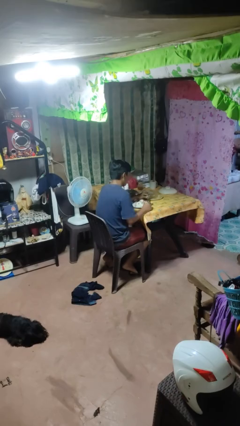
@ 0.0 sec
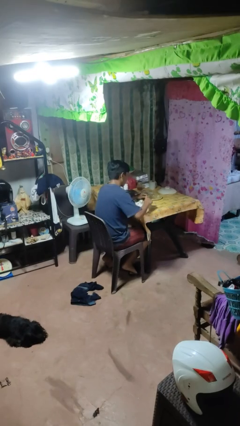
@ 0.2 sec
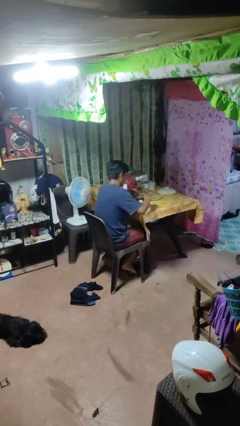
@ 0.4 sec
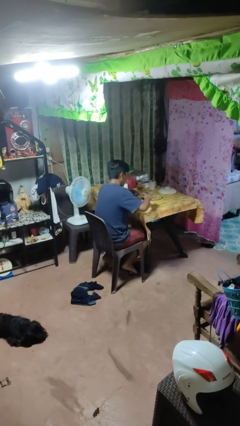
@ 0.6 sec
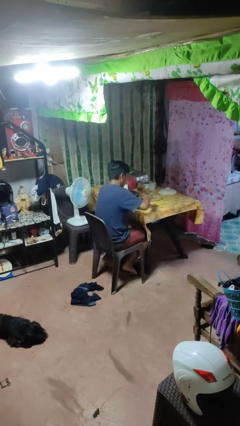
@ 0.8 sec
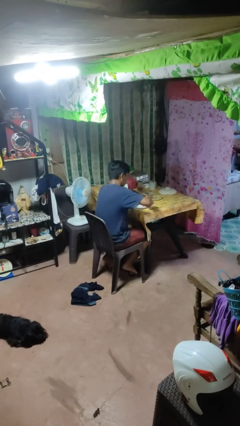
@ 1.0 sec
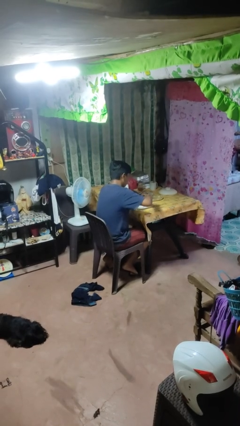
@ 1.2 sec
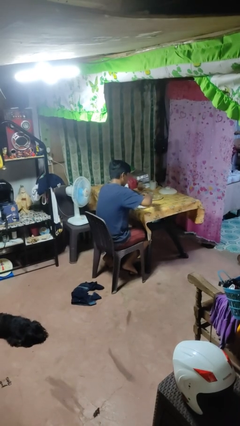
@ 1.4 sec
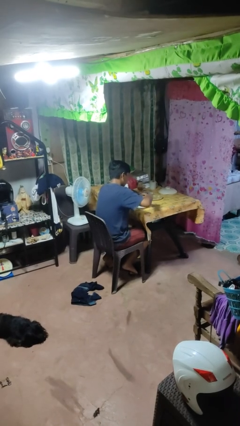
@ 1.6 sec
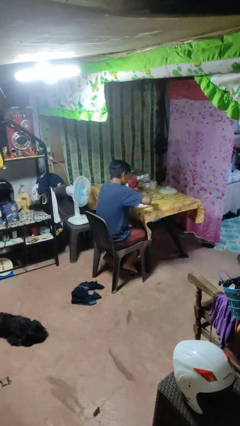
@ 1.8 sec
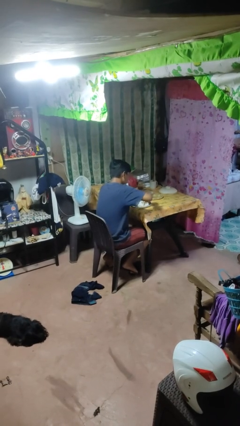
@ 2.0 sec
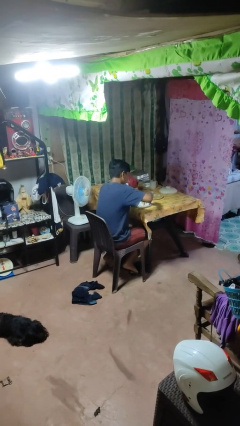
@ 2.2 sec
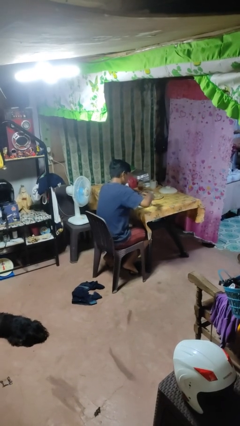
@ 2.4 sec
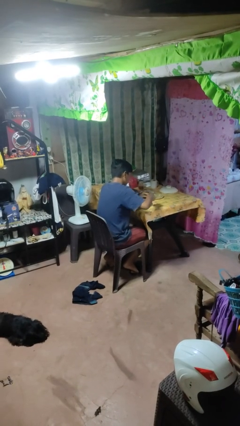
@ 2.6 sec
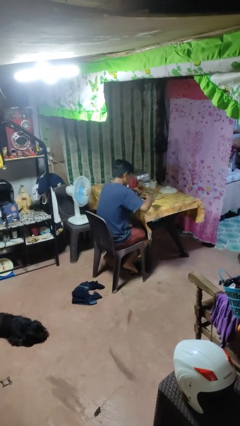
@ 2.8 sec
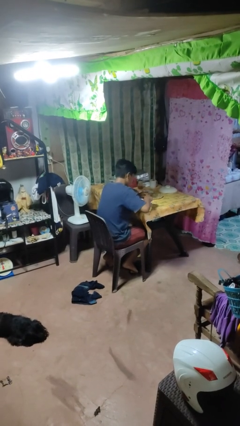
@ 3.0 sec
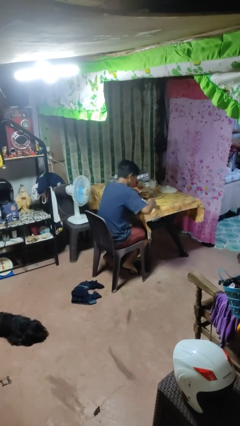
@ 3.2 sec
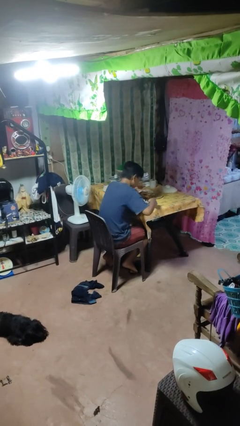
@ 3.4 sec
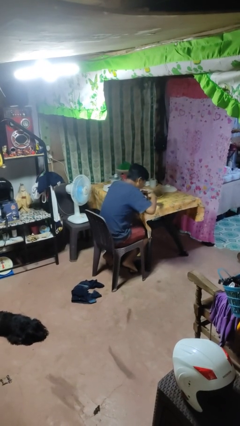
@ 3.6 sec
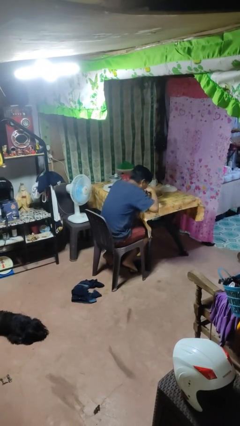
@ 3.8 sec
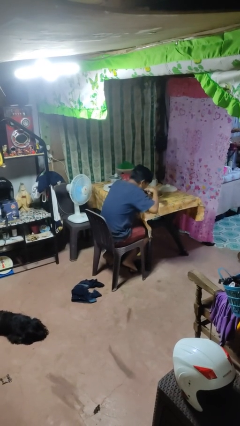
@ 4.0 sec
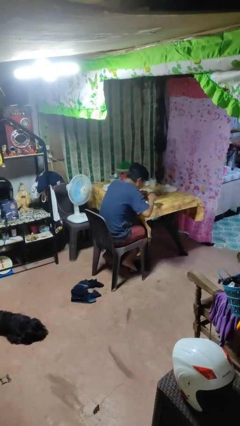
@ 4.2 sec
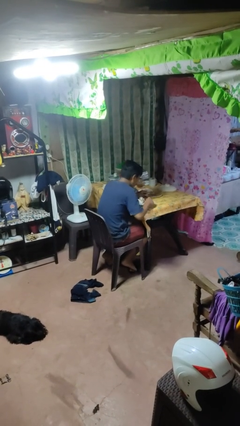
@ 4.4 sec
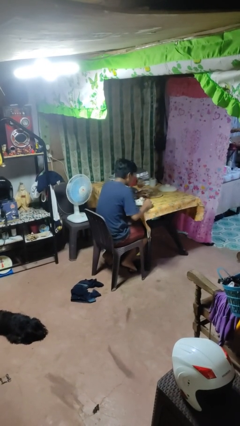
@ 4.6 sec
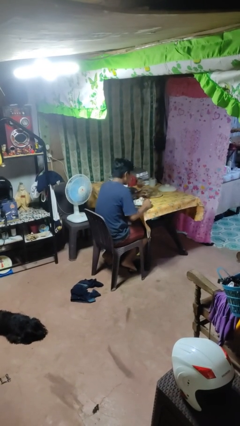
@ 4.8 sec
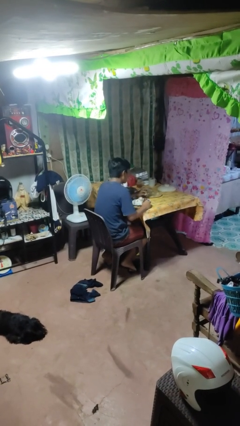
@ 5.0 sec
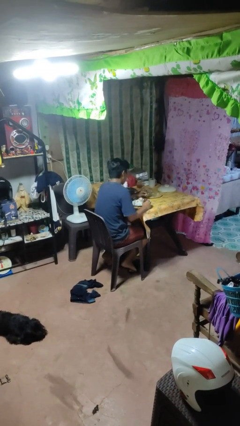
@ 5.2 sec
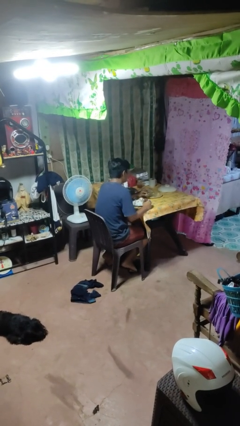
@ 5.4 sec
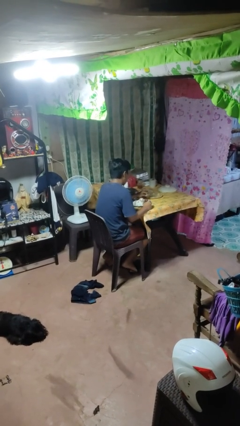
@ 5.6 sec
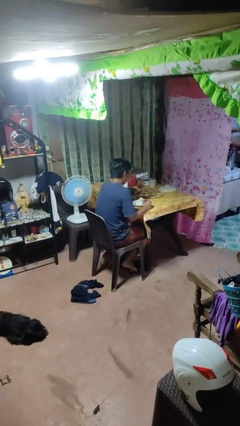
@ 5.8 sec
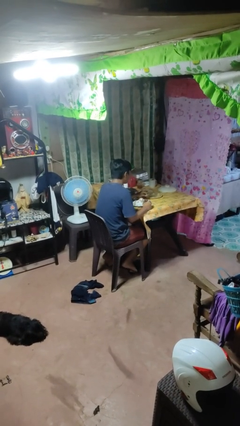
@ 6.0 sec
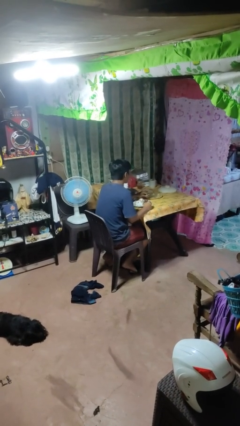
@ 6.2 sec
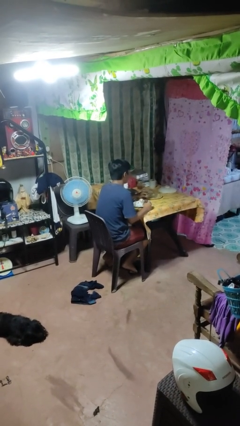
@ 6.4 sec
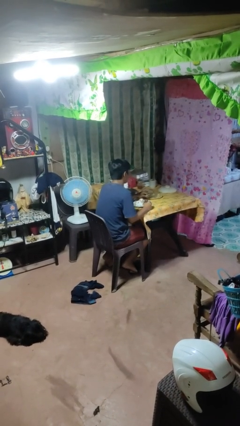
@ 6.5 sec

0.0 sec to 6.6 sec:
person eats with utensil

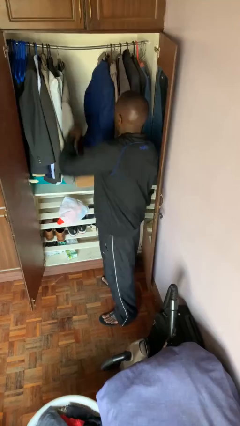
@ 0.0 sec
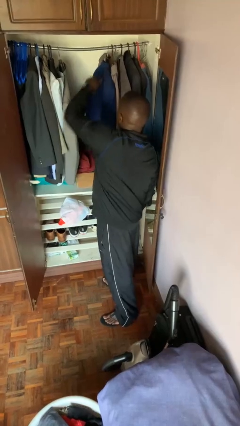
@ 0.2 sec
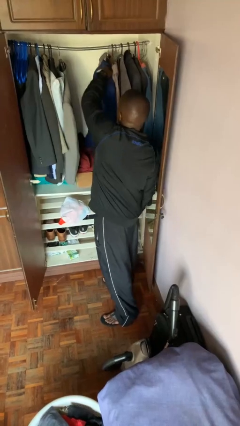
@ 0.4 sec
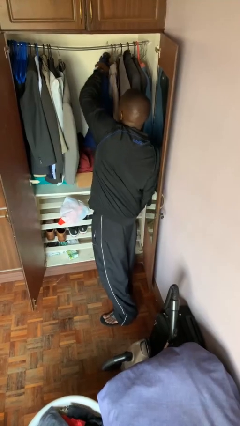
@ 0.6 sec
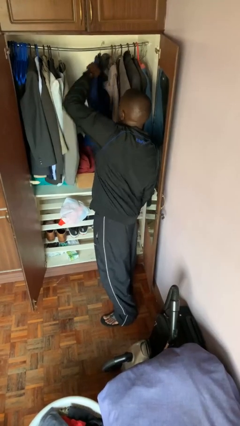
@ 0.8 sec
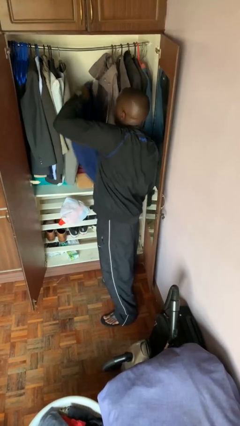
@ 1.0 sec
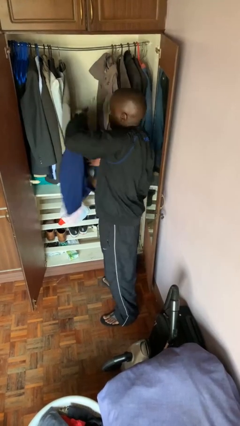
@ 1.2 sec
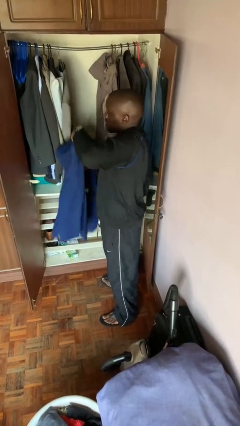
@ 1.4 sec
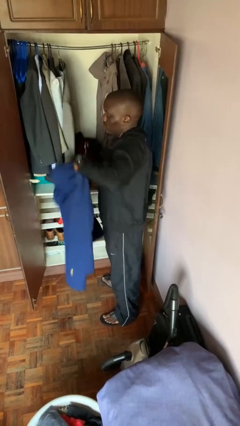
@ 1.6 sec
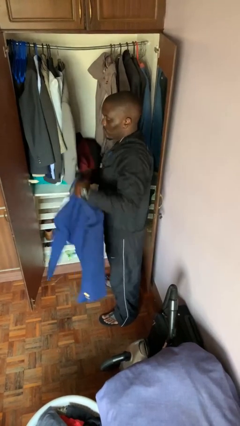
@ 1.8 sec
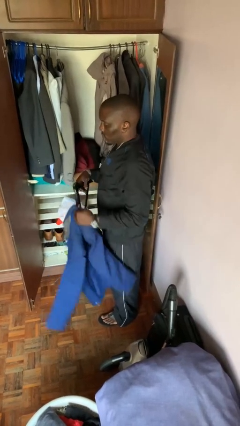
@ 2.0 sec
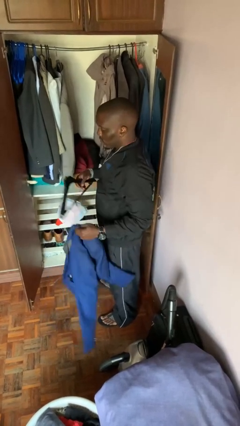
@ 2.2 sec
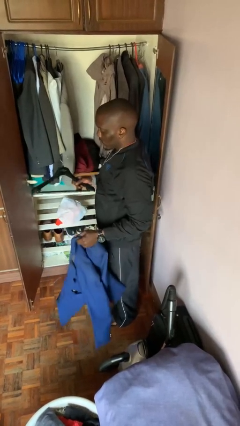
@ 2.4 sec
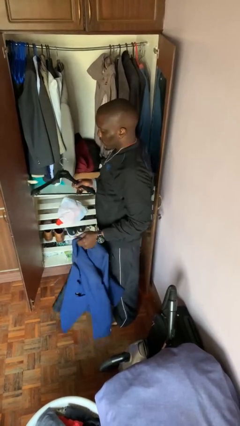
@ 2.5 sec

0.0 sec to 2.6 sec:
person takes clothes from closet

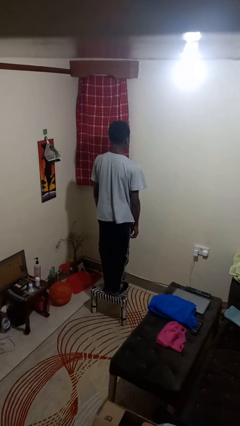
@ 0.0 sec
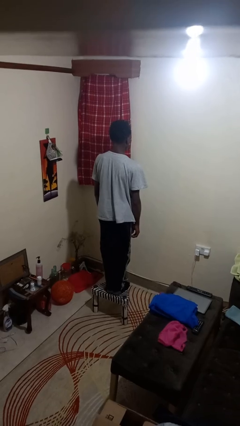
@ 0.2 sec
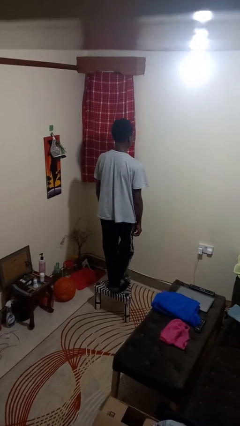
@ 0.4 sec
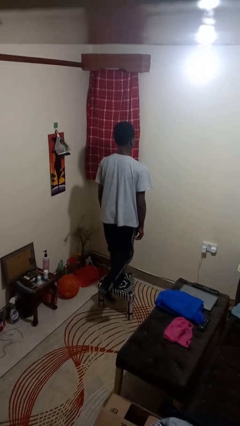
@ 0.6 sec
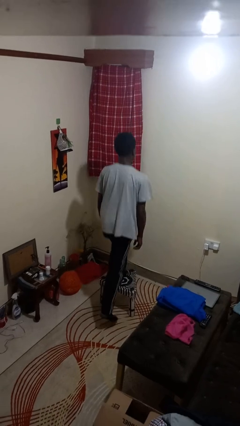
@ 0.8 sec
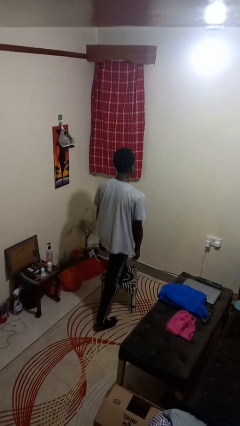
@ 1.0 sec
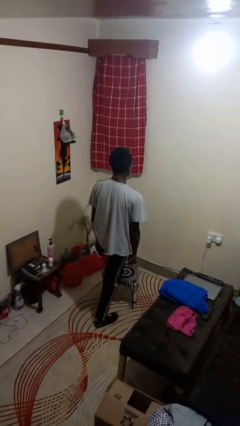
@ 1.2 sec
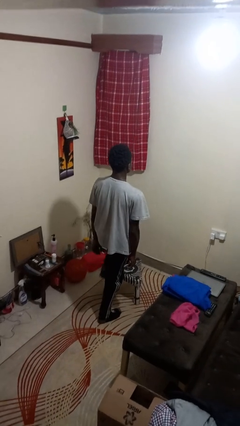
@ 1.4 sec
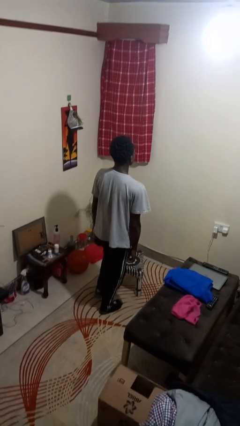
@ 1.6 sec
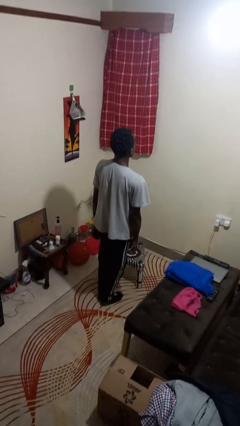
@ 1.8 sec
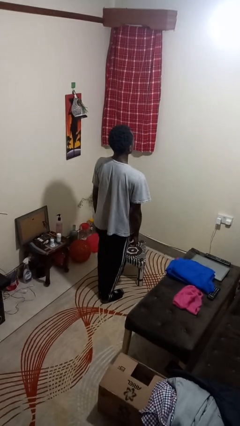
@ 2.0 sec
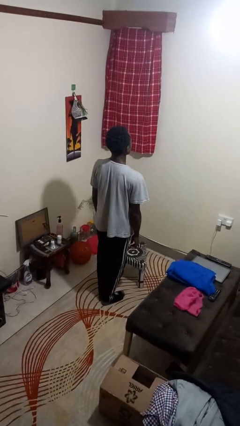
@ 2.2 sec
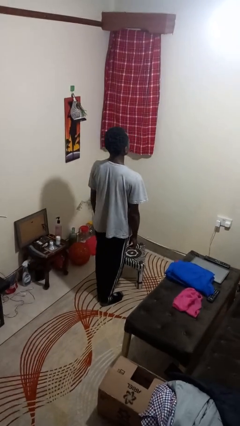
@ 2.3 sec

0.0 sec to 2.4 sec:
person climbs off chair

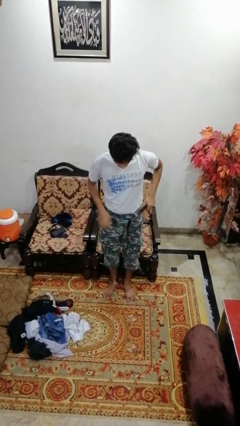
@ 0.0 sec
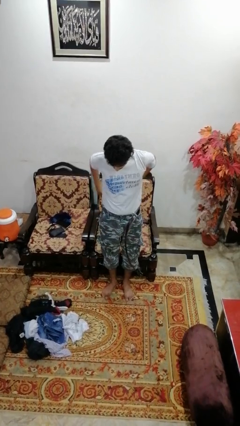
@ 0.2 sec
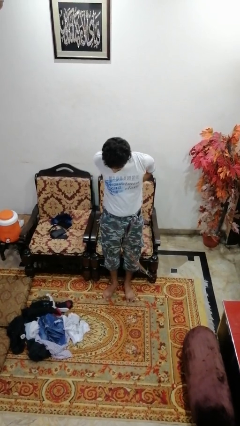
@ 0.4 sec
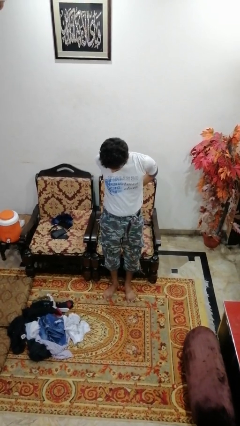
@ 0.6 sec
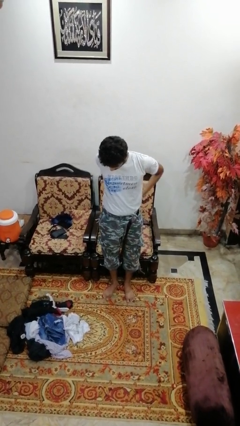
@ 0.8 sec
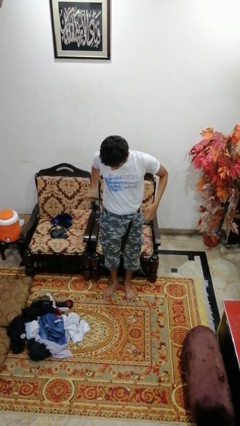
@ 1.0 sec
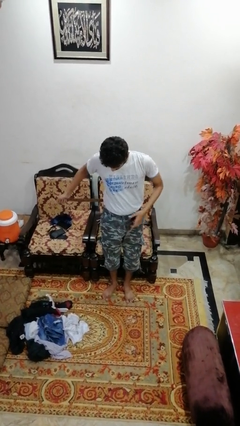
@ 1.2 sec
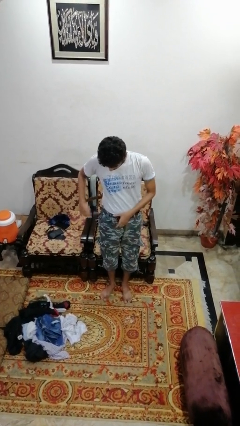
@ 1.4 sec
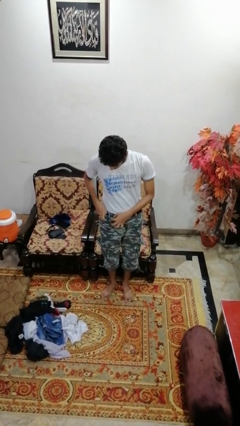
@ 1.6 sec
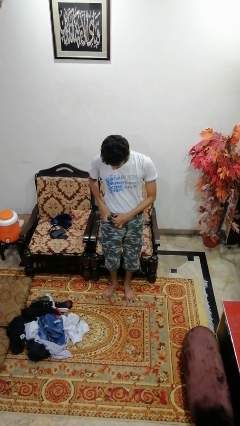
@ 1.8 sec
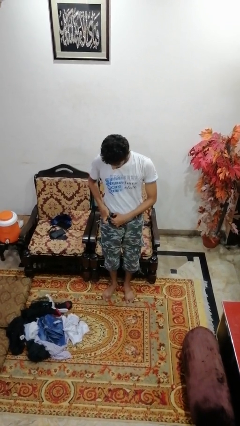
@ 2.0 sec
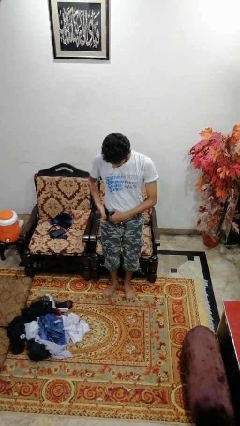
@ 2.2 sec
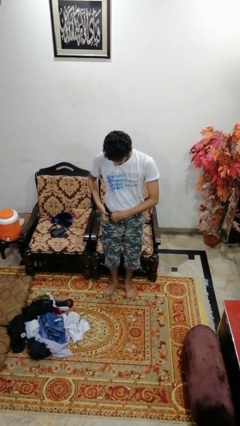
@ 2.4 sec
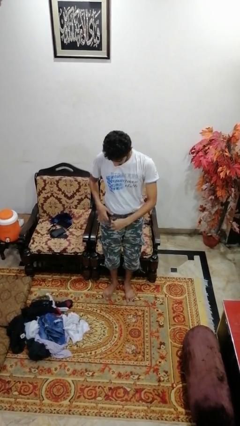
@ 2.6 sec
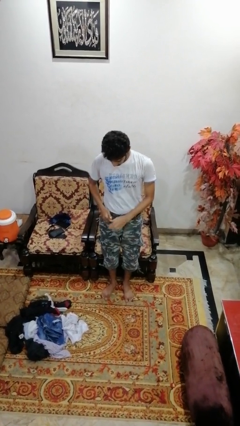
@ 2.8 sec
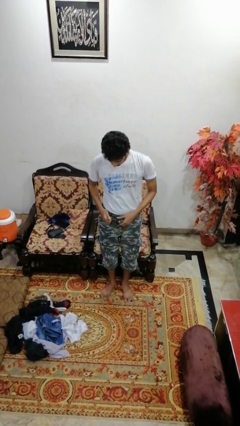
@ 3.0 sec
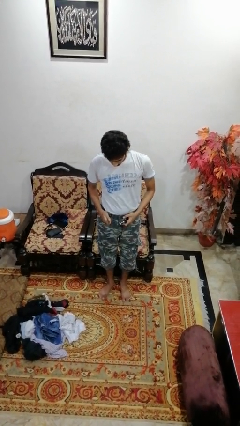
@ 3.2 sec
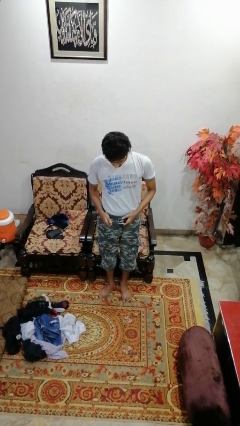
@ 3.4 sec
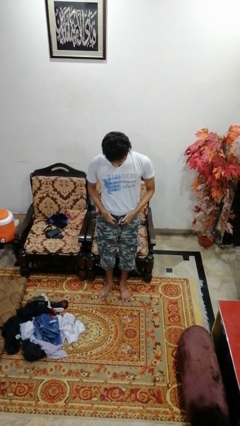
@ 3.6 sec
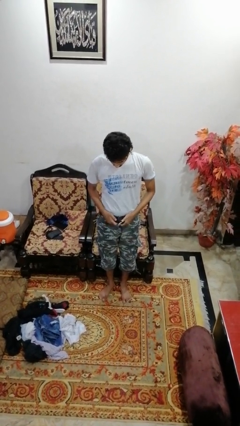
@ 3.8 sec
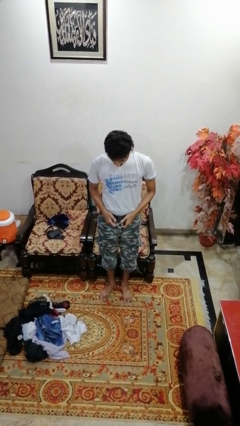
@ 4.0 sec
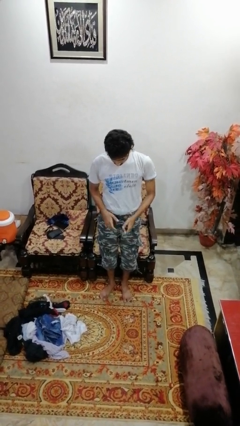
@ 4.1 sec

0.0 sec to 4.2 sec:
person puts on belt

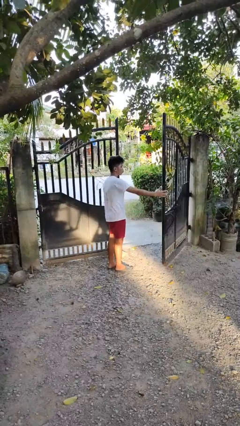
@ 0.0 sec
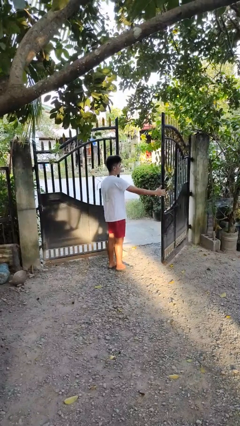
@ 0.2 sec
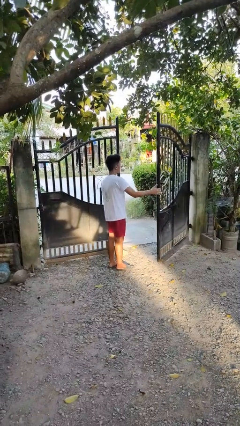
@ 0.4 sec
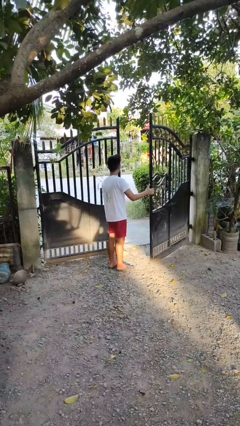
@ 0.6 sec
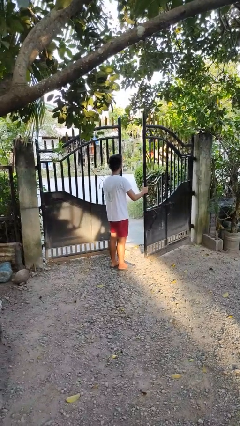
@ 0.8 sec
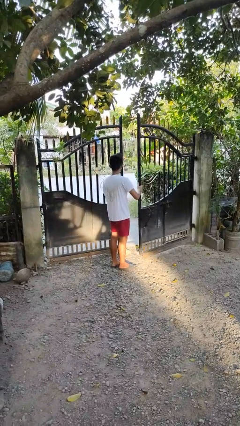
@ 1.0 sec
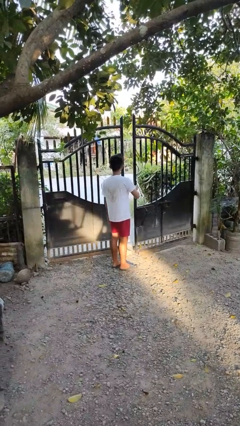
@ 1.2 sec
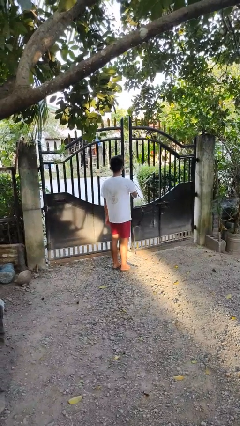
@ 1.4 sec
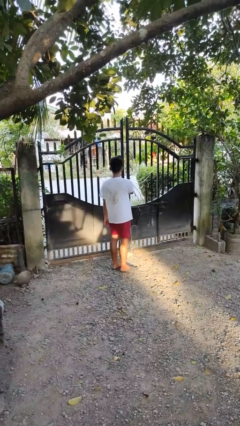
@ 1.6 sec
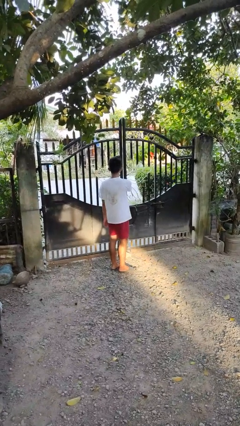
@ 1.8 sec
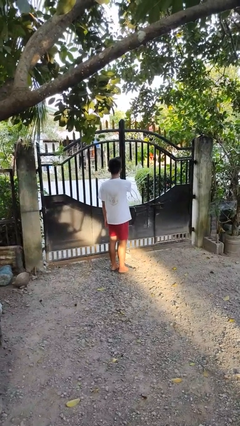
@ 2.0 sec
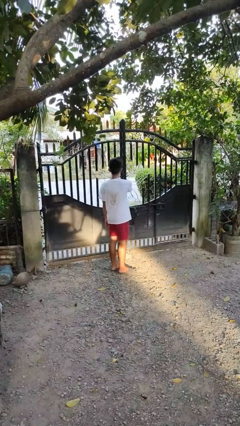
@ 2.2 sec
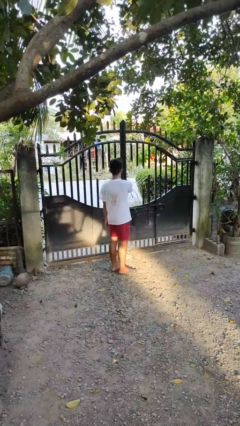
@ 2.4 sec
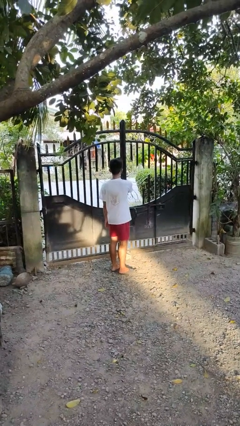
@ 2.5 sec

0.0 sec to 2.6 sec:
person closes gate
